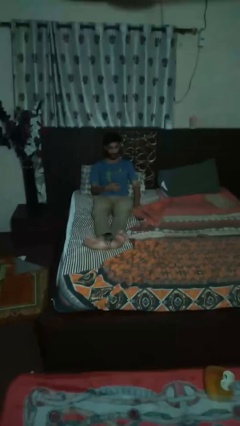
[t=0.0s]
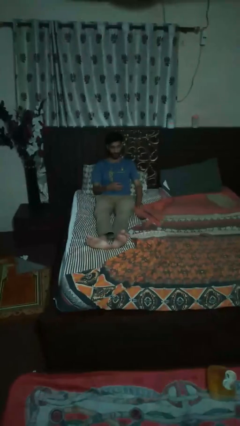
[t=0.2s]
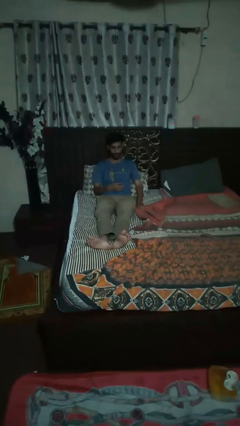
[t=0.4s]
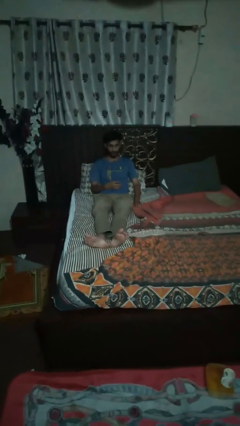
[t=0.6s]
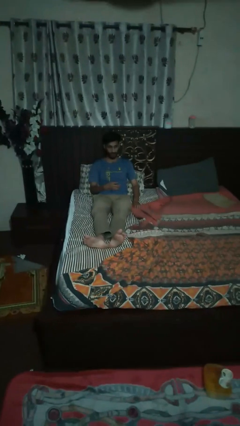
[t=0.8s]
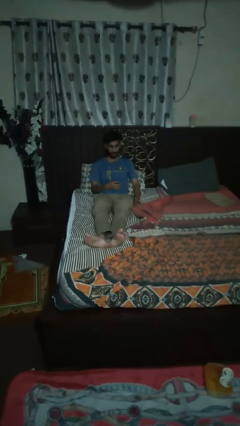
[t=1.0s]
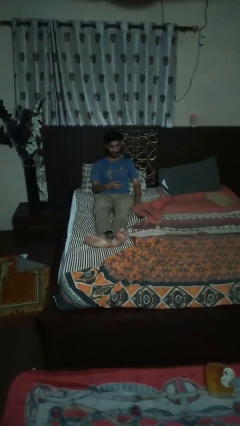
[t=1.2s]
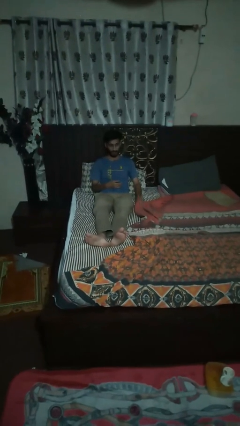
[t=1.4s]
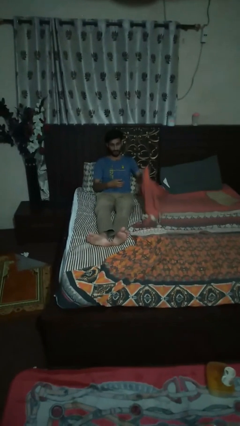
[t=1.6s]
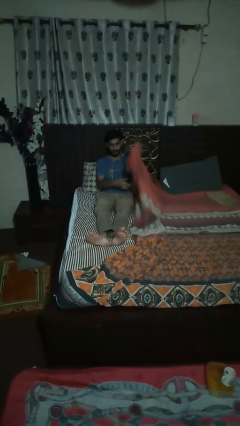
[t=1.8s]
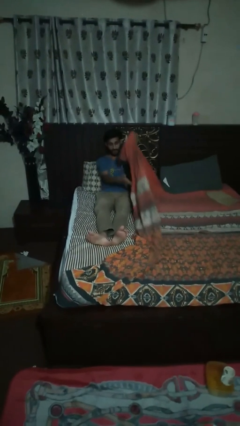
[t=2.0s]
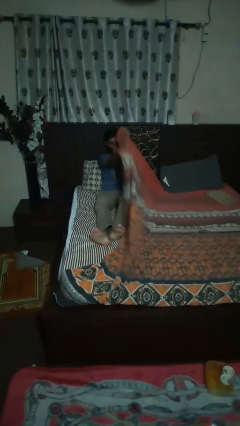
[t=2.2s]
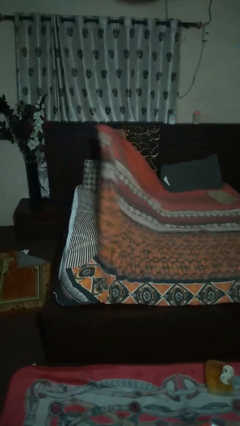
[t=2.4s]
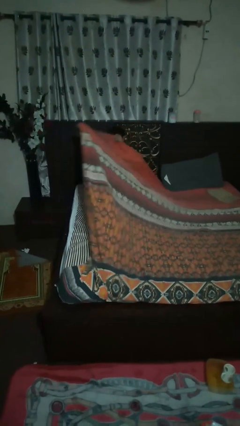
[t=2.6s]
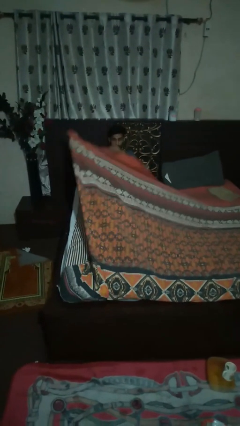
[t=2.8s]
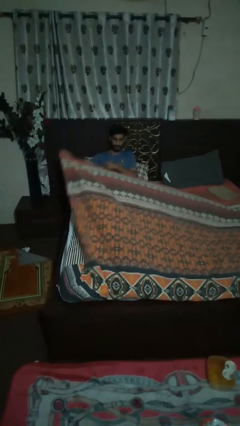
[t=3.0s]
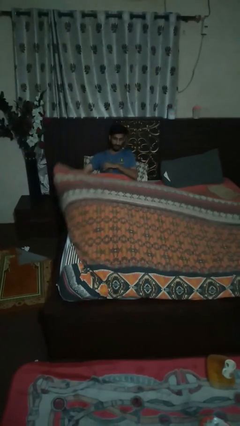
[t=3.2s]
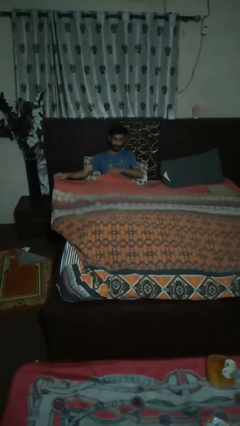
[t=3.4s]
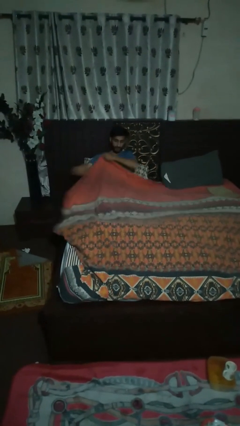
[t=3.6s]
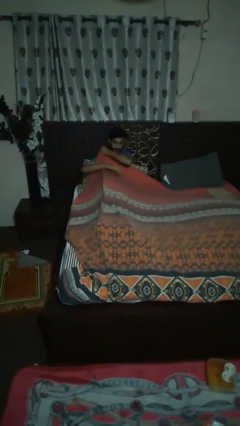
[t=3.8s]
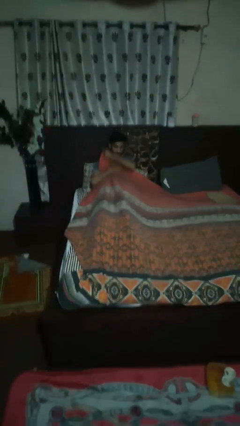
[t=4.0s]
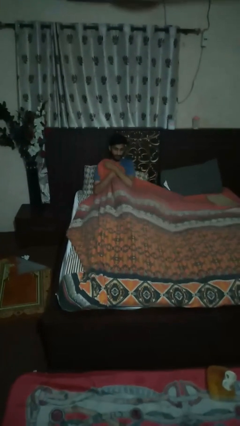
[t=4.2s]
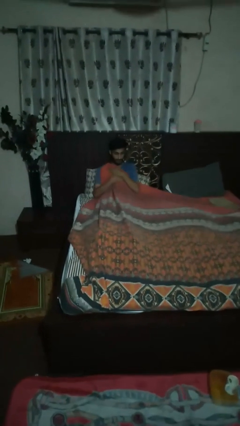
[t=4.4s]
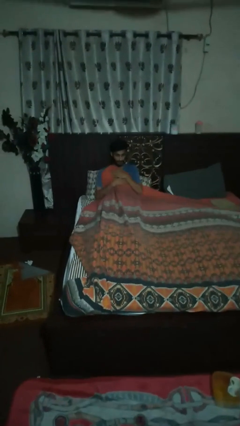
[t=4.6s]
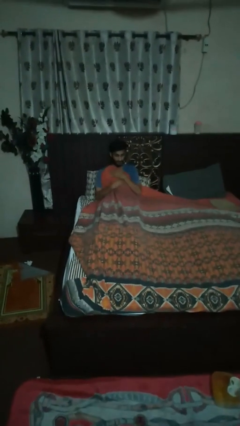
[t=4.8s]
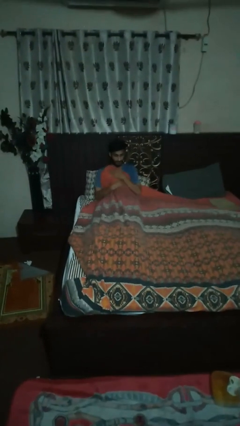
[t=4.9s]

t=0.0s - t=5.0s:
person covers with bedsheets

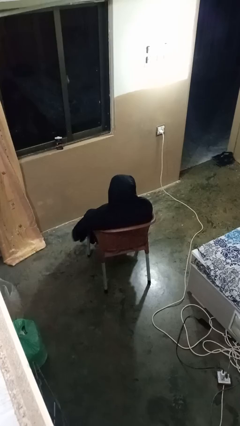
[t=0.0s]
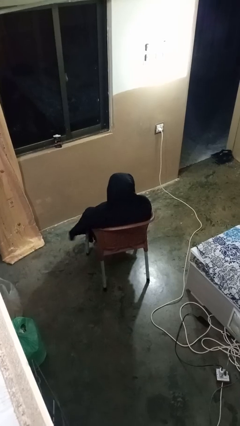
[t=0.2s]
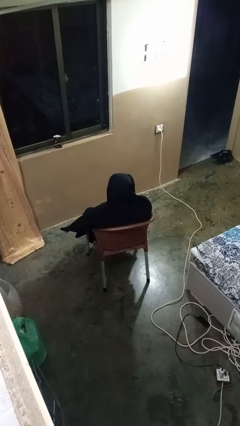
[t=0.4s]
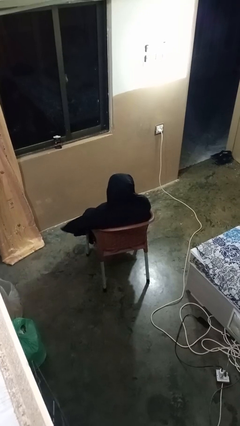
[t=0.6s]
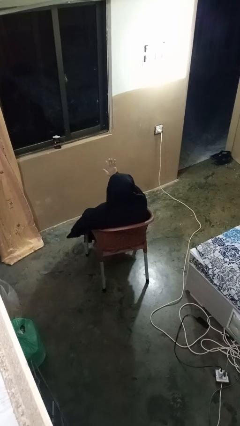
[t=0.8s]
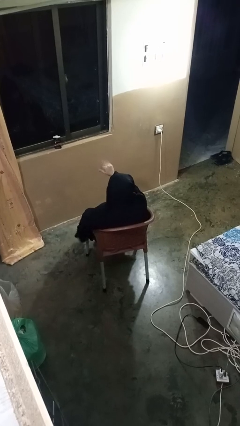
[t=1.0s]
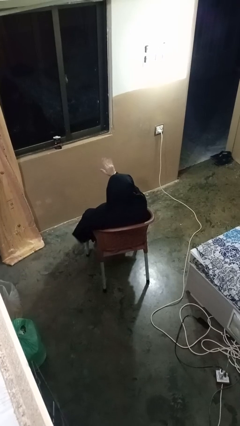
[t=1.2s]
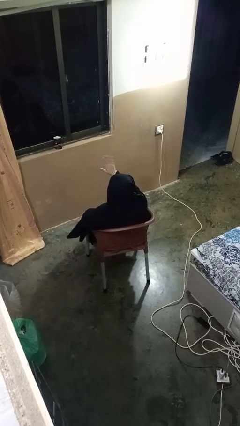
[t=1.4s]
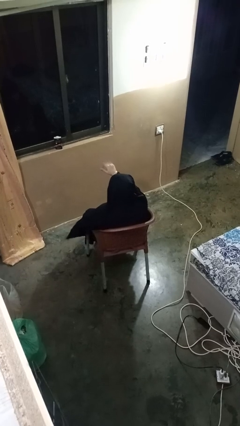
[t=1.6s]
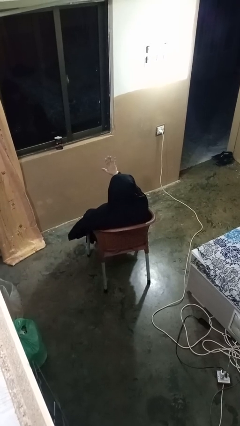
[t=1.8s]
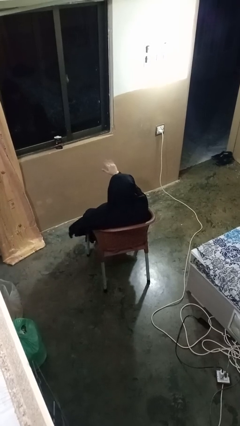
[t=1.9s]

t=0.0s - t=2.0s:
person gestures come here

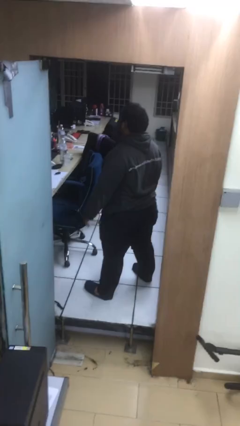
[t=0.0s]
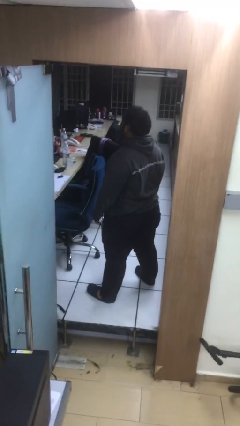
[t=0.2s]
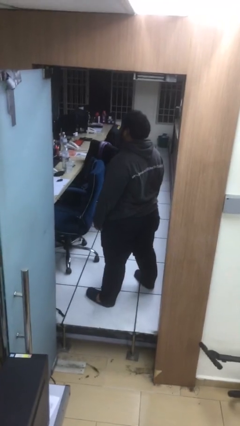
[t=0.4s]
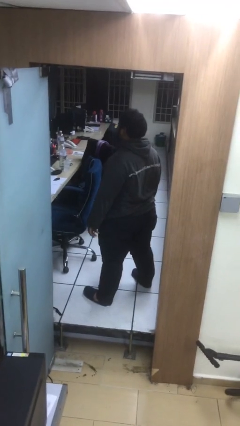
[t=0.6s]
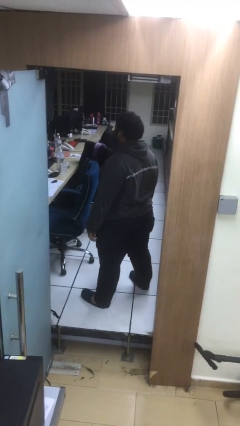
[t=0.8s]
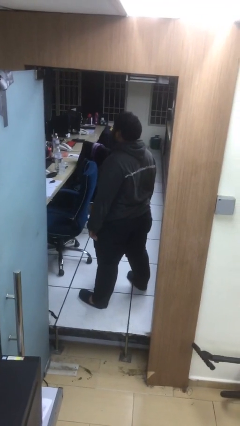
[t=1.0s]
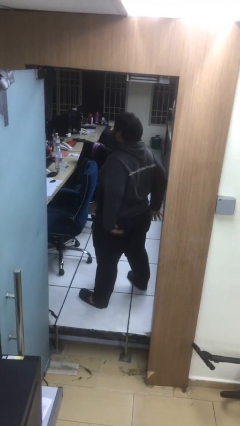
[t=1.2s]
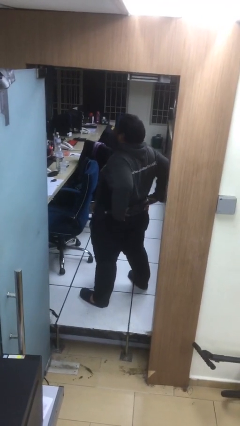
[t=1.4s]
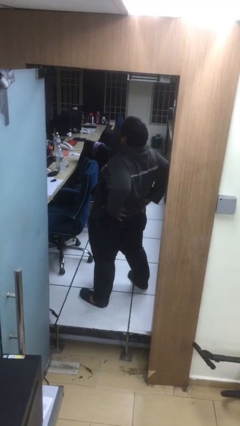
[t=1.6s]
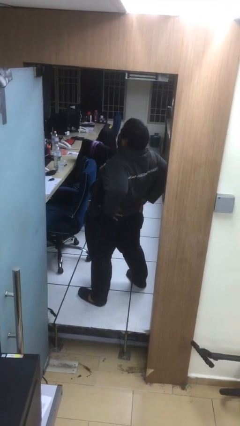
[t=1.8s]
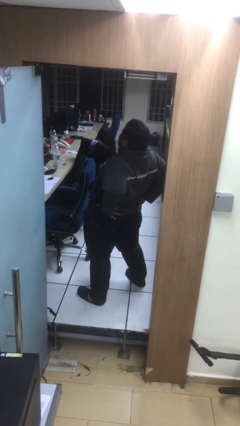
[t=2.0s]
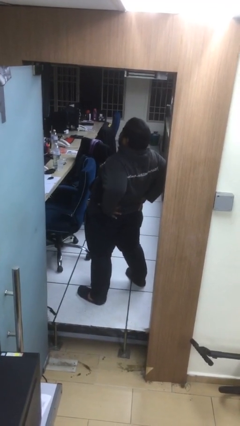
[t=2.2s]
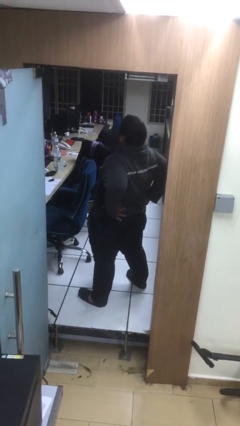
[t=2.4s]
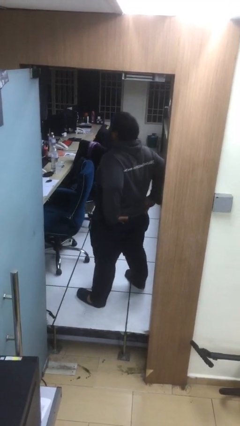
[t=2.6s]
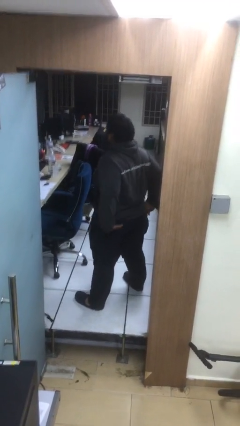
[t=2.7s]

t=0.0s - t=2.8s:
person stretches back

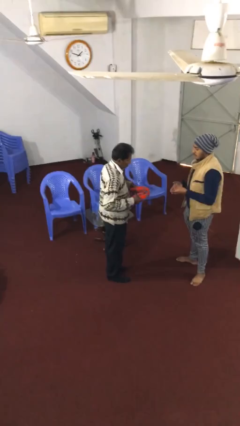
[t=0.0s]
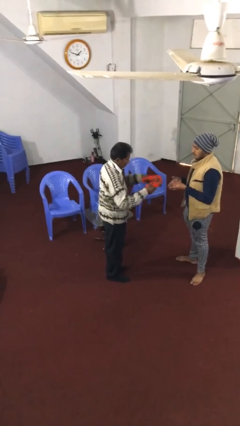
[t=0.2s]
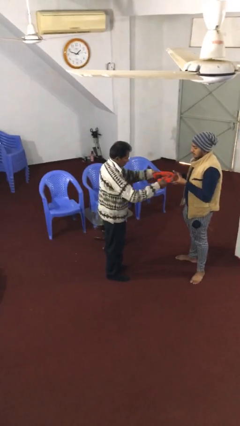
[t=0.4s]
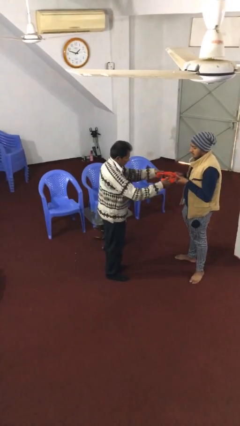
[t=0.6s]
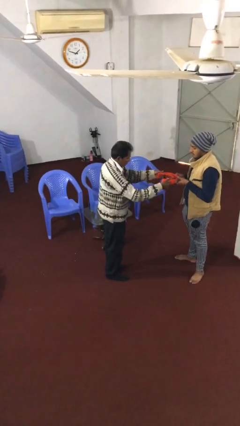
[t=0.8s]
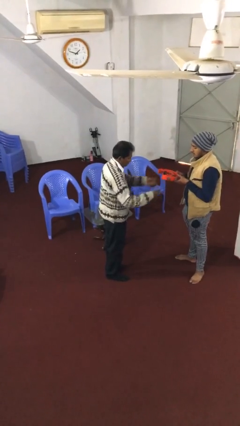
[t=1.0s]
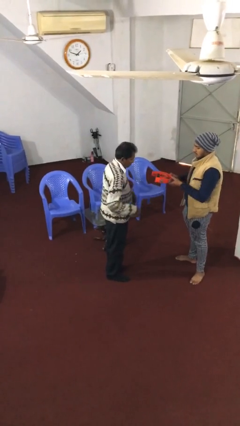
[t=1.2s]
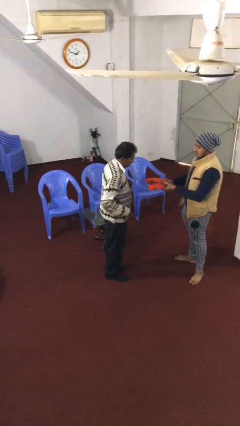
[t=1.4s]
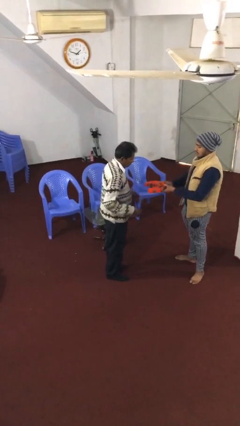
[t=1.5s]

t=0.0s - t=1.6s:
person transfers object to person

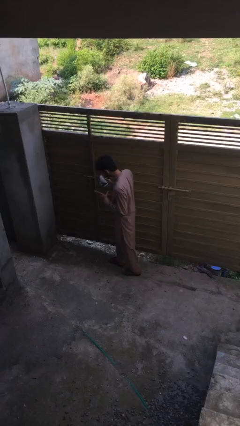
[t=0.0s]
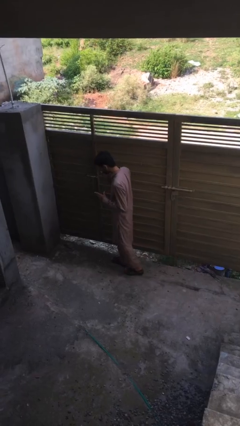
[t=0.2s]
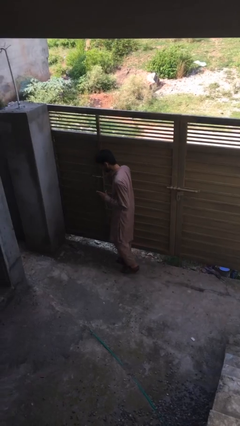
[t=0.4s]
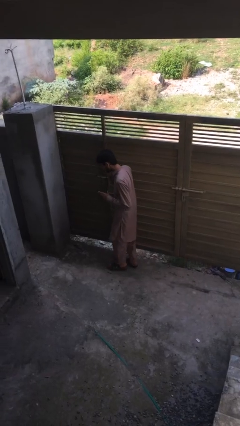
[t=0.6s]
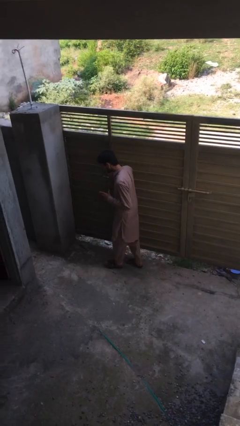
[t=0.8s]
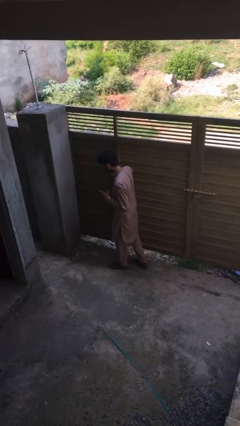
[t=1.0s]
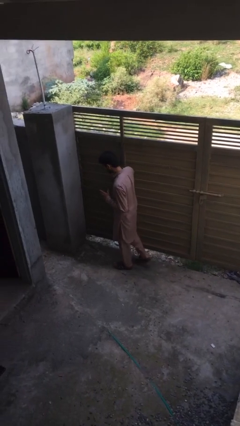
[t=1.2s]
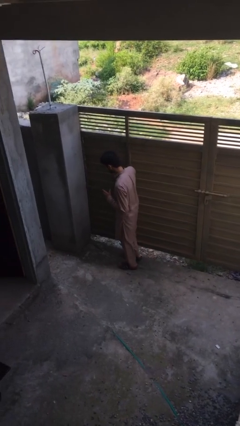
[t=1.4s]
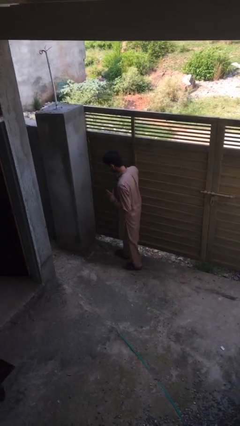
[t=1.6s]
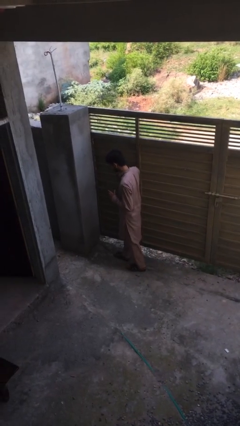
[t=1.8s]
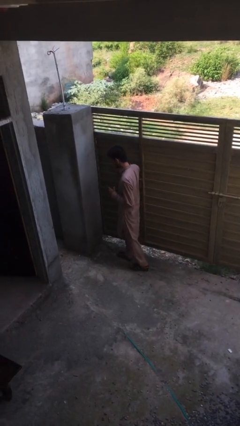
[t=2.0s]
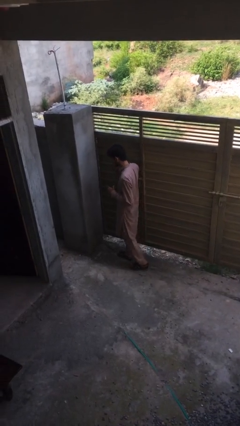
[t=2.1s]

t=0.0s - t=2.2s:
person talks on phone

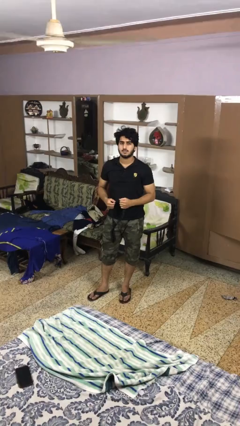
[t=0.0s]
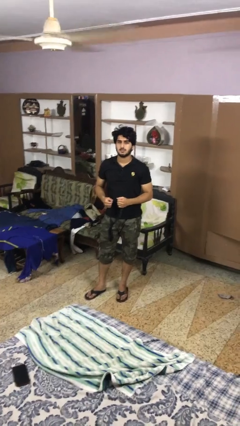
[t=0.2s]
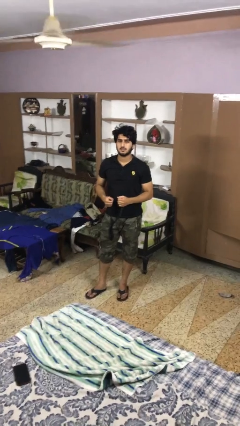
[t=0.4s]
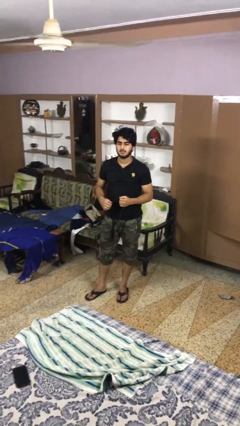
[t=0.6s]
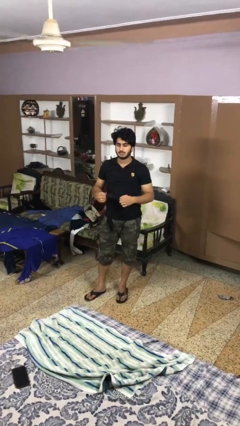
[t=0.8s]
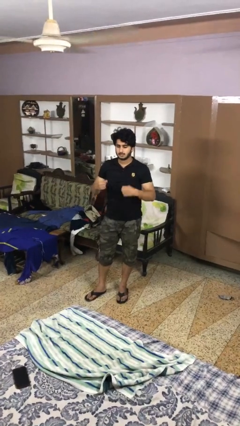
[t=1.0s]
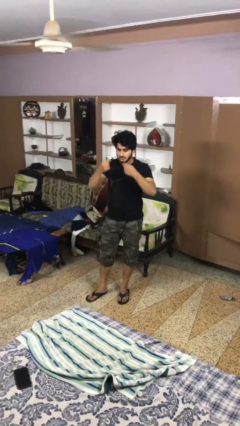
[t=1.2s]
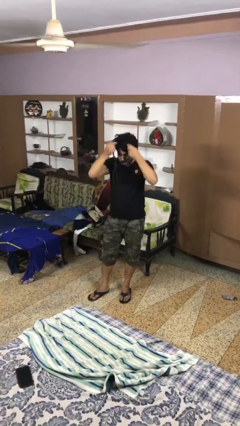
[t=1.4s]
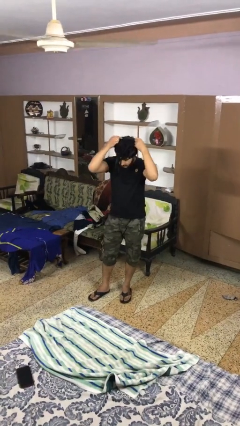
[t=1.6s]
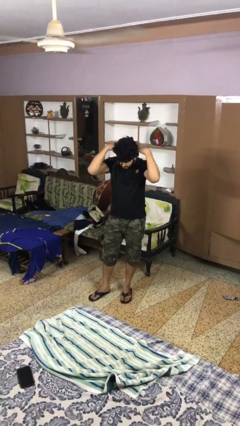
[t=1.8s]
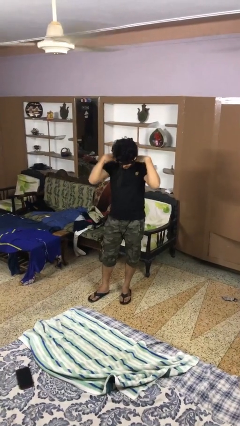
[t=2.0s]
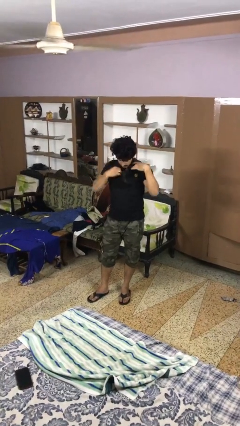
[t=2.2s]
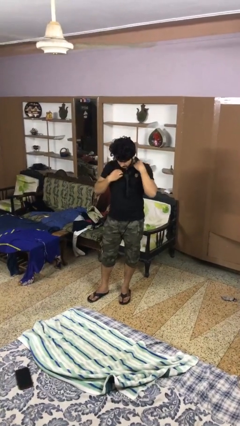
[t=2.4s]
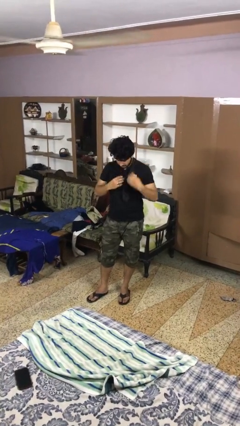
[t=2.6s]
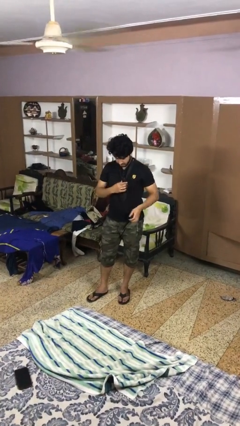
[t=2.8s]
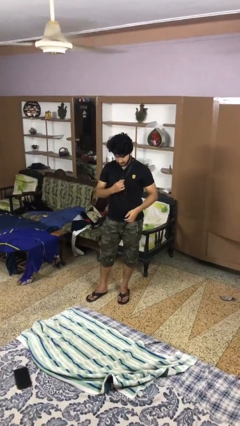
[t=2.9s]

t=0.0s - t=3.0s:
person puts on necktie

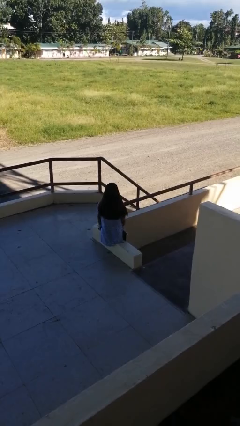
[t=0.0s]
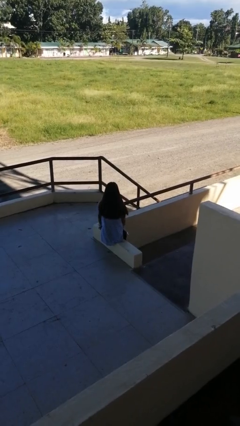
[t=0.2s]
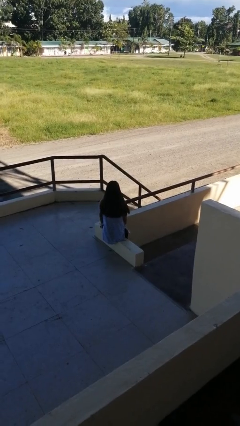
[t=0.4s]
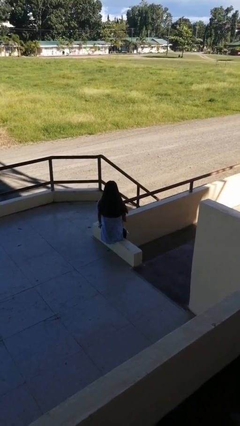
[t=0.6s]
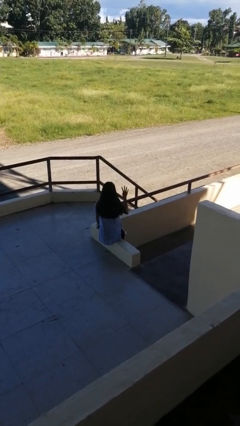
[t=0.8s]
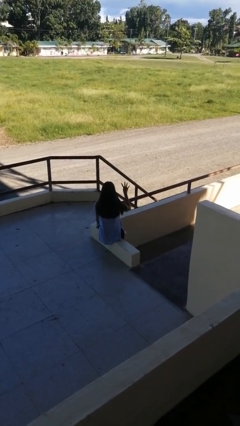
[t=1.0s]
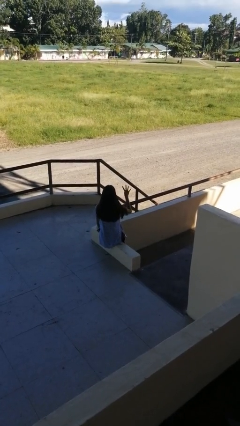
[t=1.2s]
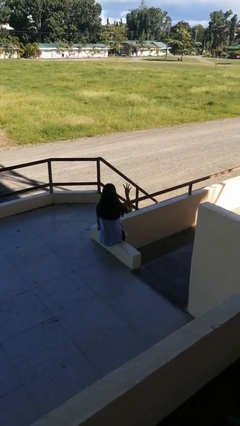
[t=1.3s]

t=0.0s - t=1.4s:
person gestures number four
